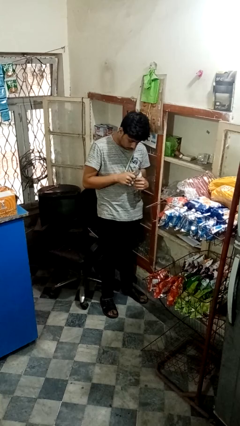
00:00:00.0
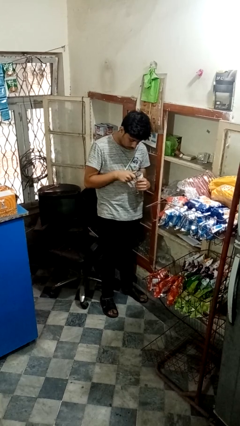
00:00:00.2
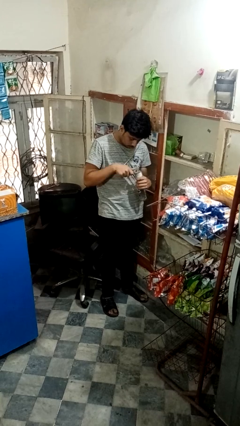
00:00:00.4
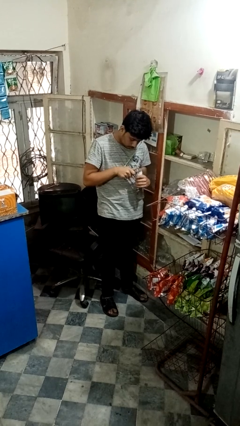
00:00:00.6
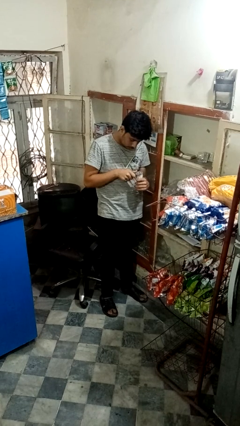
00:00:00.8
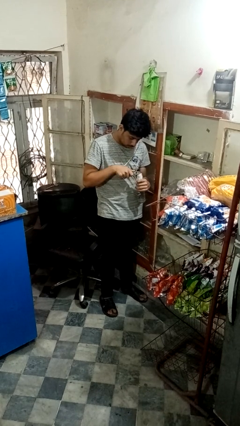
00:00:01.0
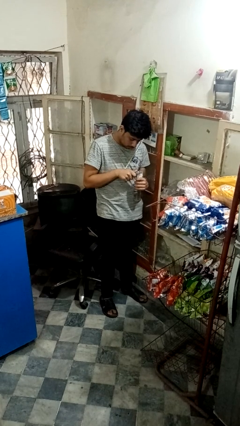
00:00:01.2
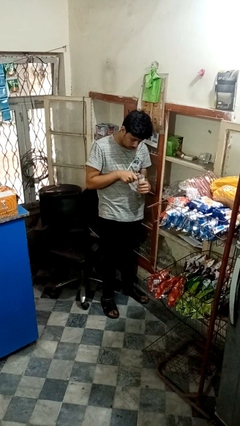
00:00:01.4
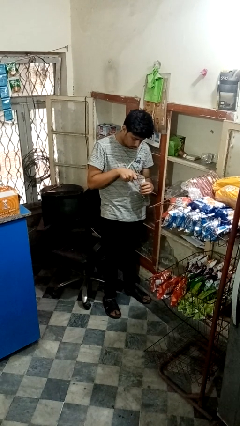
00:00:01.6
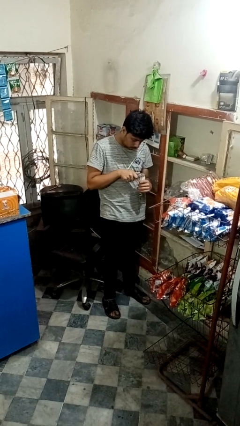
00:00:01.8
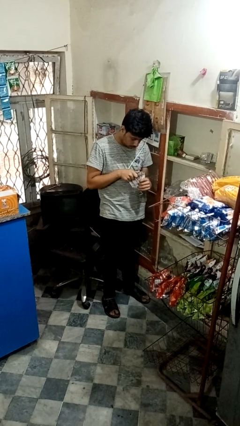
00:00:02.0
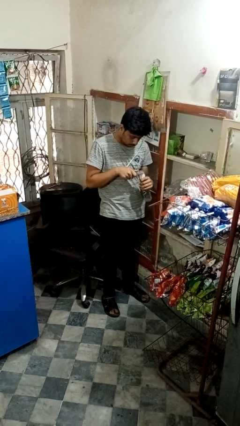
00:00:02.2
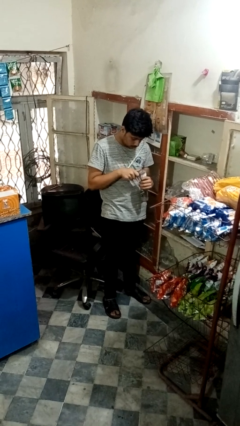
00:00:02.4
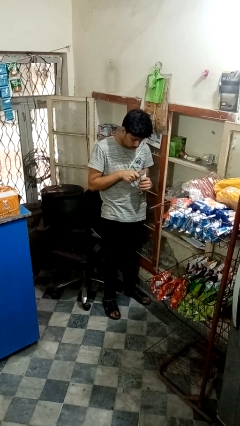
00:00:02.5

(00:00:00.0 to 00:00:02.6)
person opens can with can opener

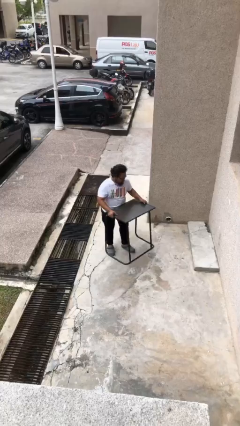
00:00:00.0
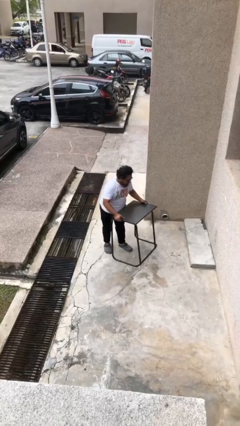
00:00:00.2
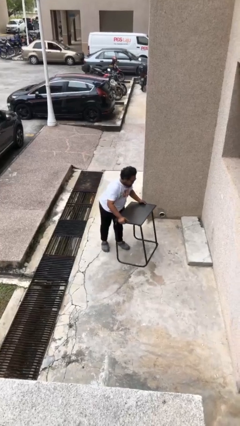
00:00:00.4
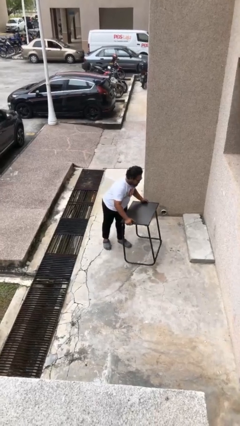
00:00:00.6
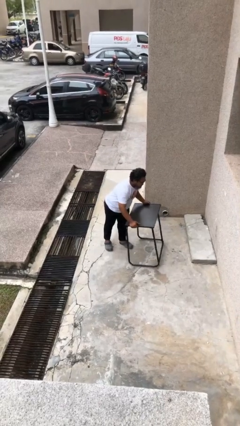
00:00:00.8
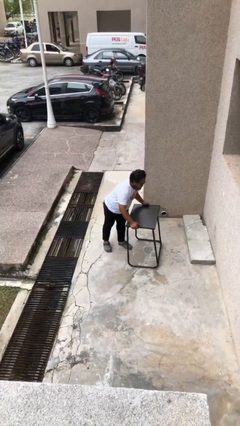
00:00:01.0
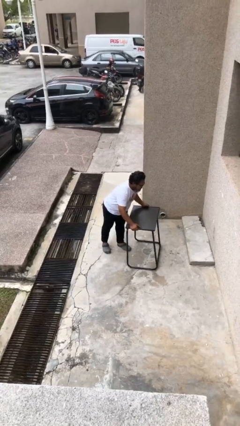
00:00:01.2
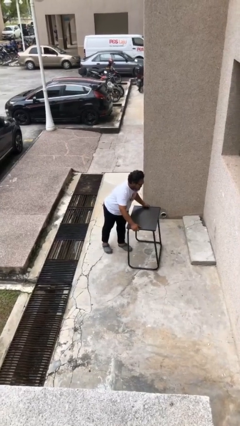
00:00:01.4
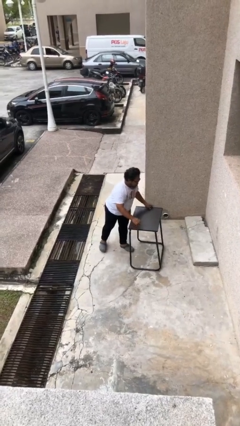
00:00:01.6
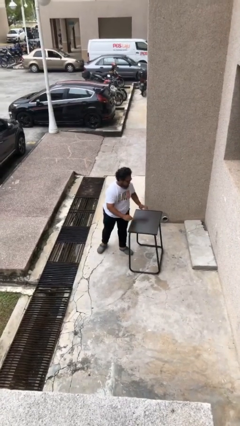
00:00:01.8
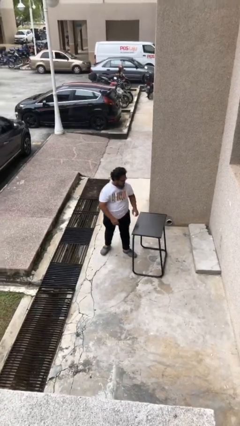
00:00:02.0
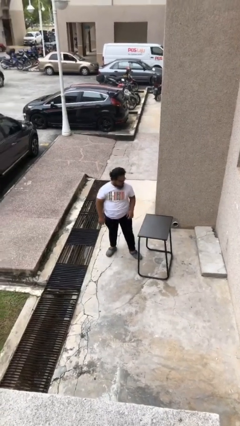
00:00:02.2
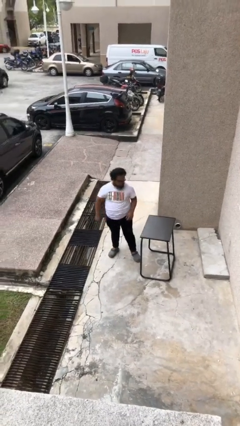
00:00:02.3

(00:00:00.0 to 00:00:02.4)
person puts down object on floor

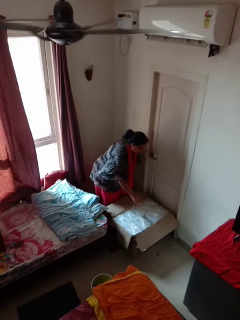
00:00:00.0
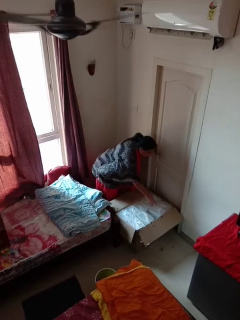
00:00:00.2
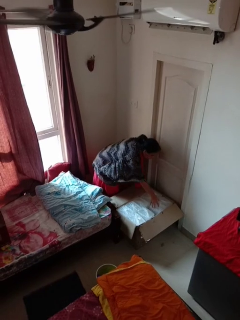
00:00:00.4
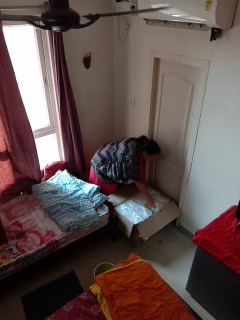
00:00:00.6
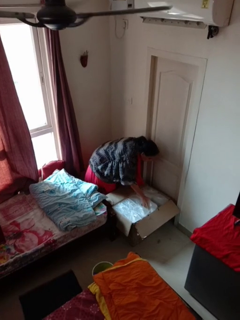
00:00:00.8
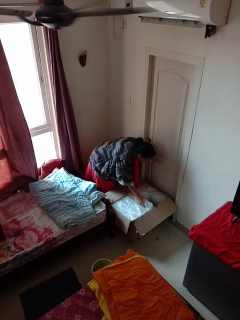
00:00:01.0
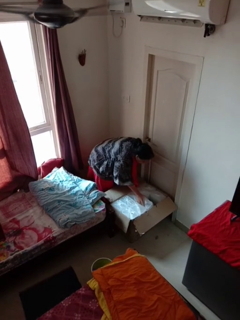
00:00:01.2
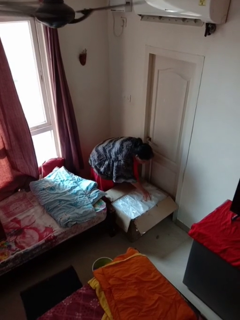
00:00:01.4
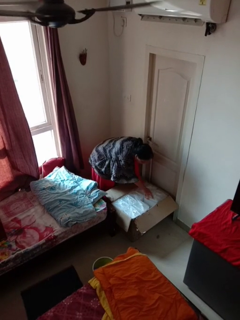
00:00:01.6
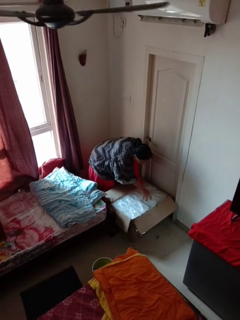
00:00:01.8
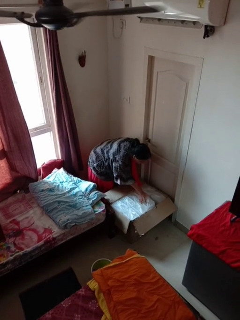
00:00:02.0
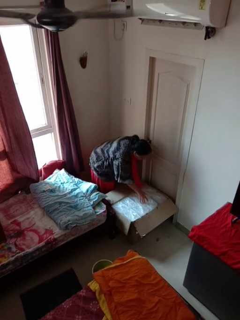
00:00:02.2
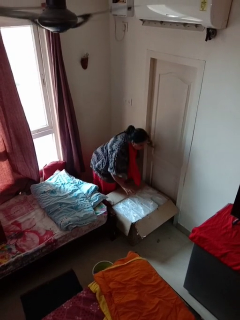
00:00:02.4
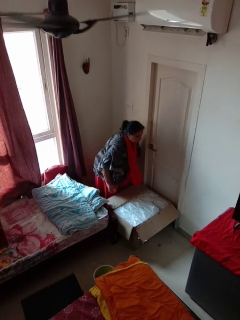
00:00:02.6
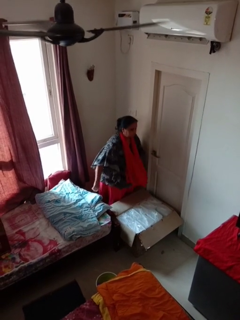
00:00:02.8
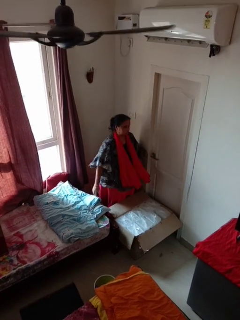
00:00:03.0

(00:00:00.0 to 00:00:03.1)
person searches in box

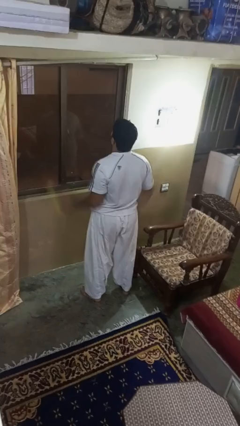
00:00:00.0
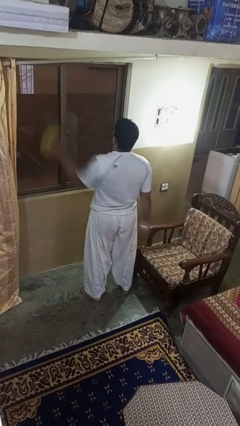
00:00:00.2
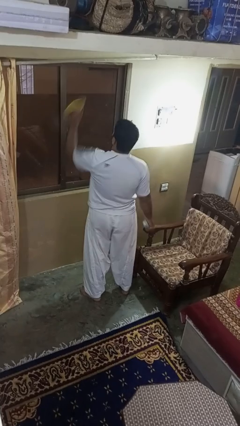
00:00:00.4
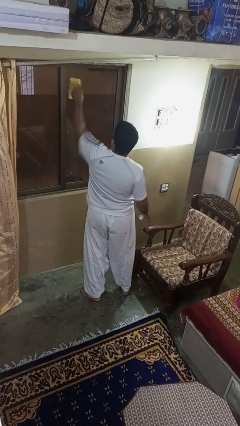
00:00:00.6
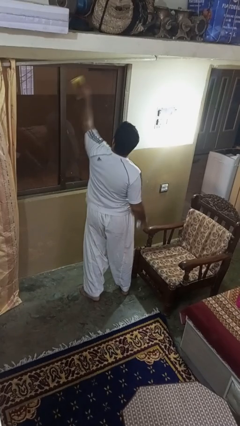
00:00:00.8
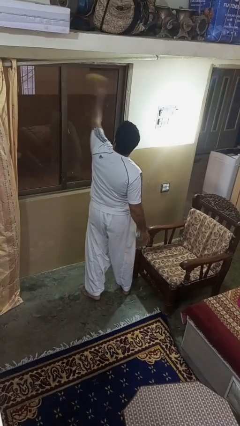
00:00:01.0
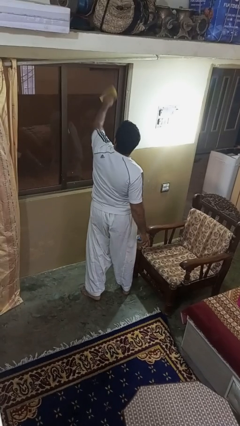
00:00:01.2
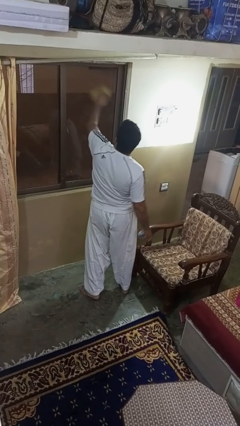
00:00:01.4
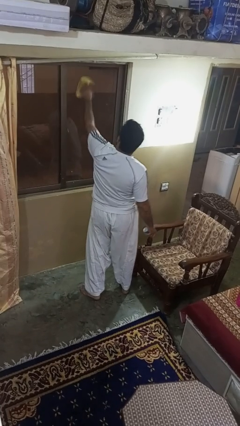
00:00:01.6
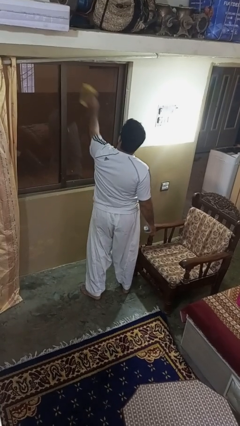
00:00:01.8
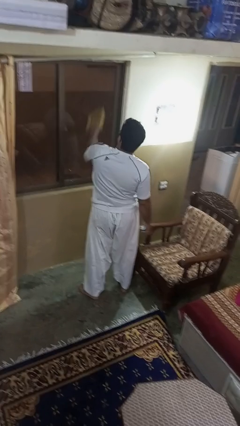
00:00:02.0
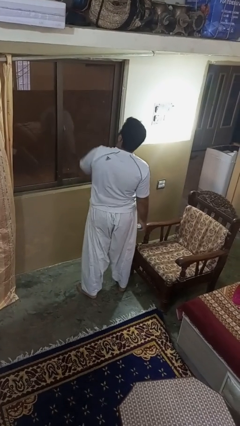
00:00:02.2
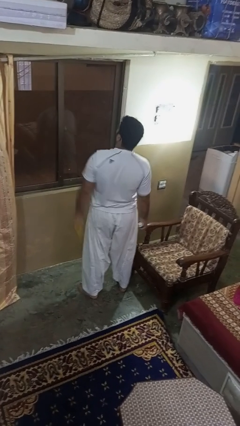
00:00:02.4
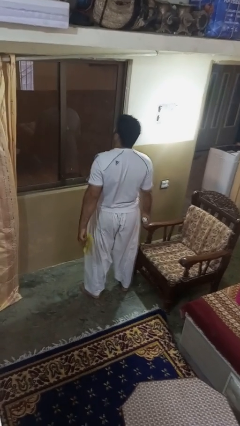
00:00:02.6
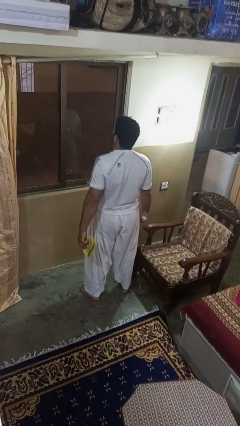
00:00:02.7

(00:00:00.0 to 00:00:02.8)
person washes window

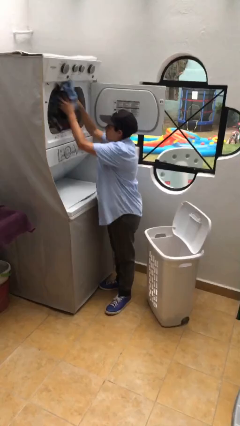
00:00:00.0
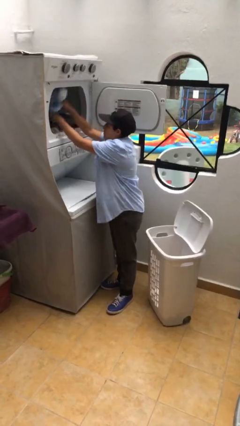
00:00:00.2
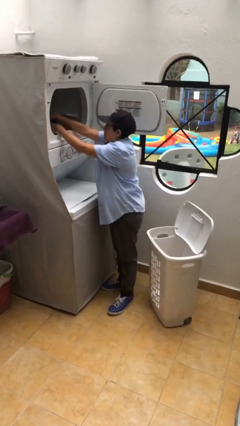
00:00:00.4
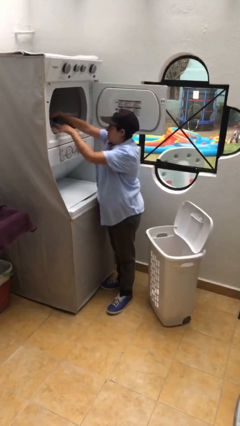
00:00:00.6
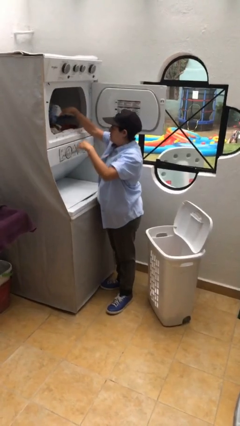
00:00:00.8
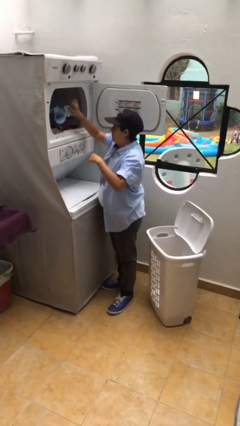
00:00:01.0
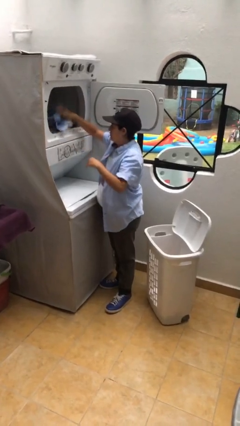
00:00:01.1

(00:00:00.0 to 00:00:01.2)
person loads dryer

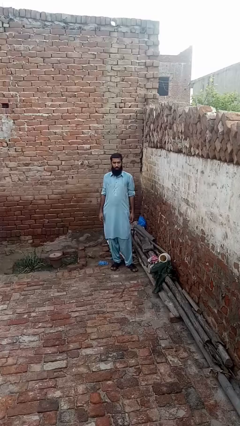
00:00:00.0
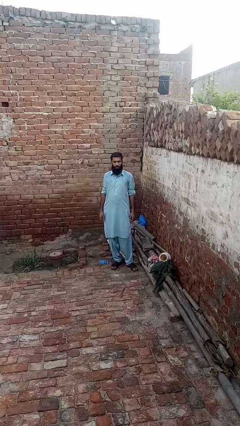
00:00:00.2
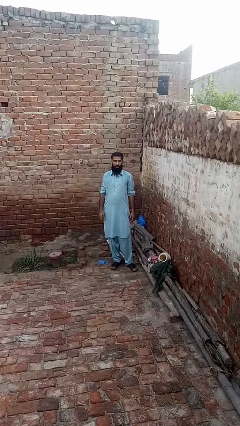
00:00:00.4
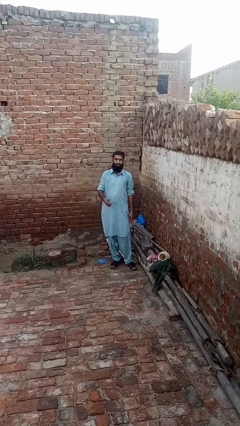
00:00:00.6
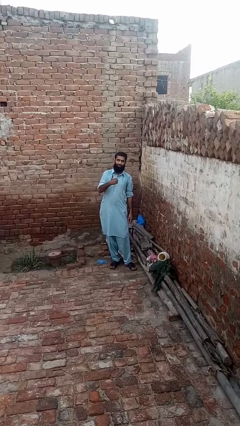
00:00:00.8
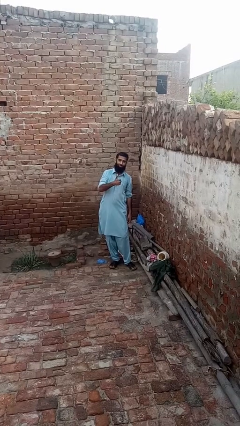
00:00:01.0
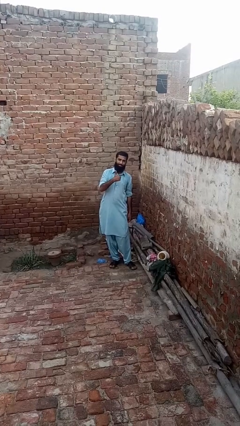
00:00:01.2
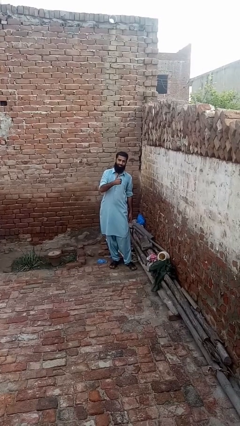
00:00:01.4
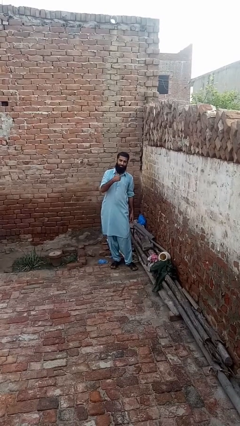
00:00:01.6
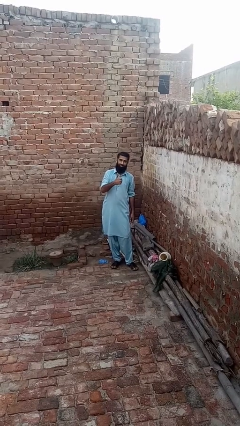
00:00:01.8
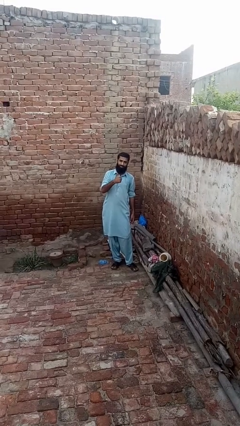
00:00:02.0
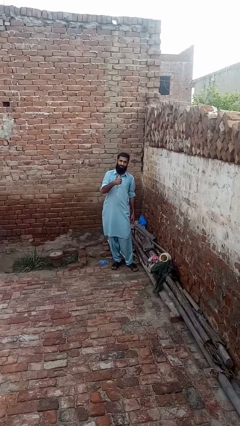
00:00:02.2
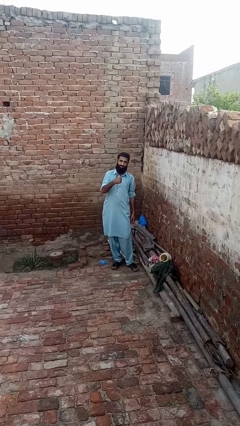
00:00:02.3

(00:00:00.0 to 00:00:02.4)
person gestures thumbs up

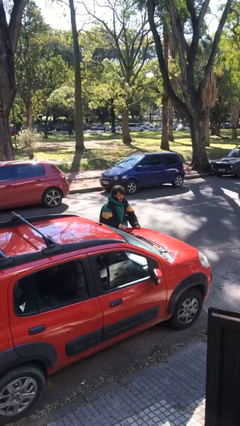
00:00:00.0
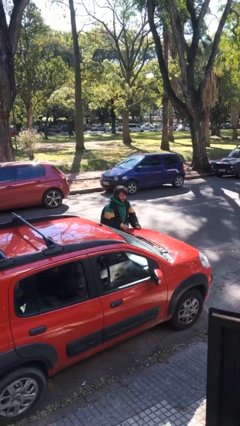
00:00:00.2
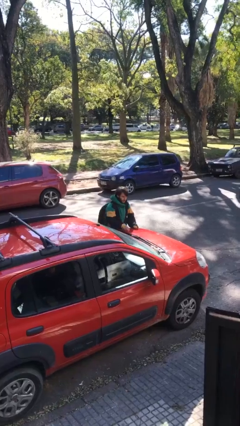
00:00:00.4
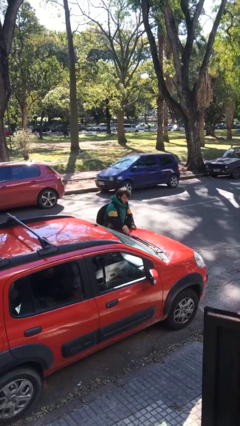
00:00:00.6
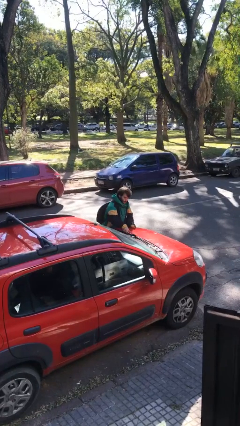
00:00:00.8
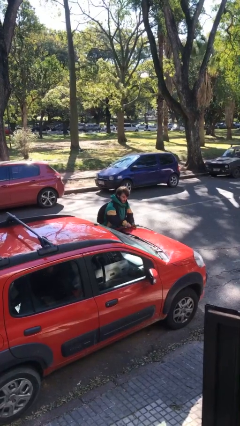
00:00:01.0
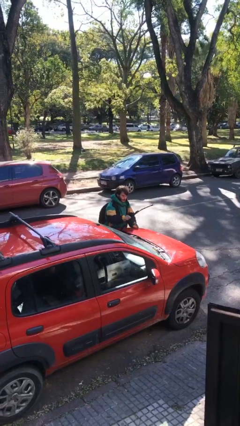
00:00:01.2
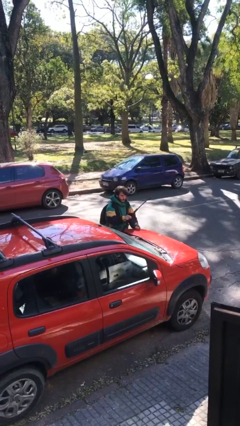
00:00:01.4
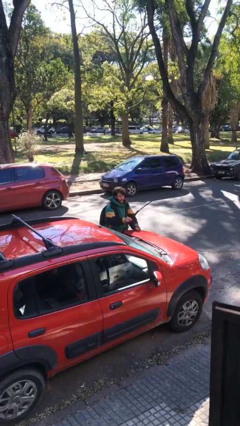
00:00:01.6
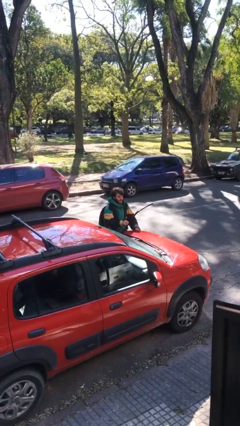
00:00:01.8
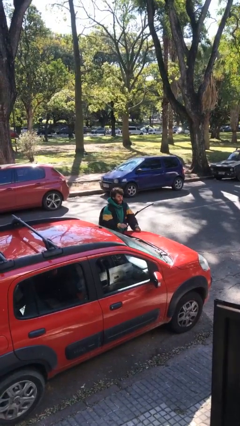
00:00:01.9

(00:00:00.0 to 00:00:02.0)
person flips up car wipers

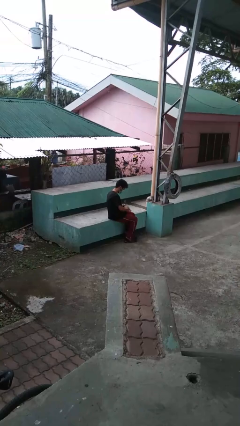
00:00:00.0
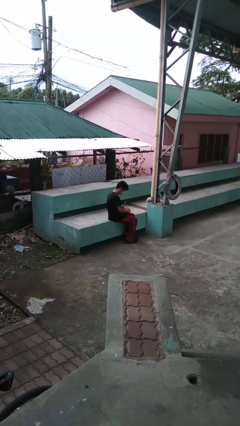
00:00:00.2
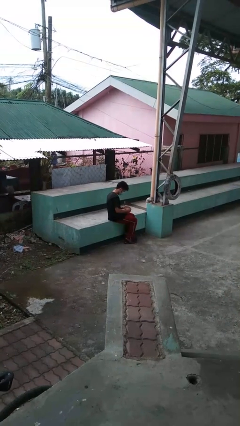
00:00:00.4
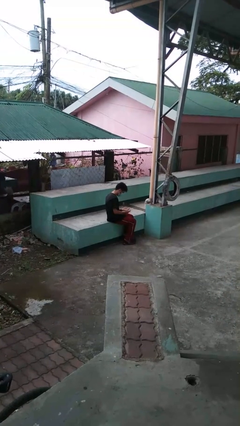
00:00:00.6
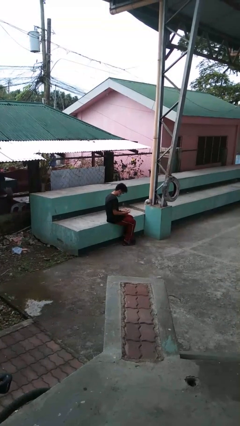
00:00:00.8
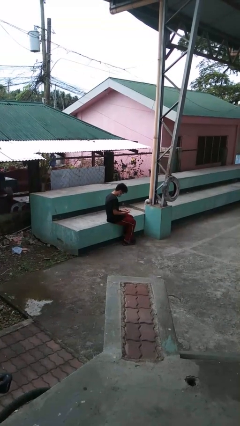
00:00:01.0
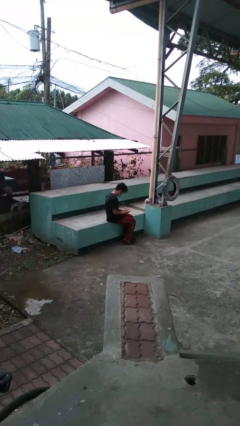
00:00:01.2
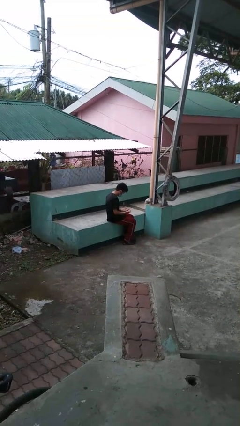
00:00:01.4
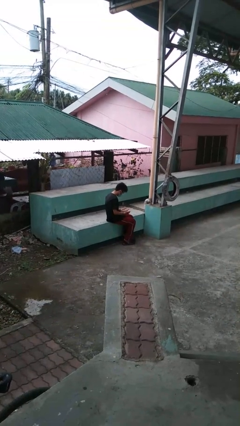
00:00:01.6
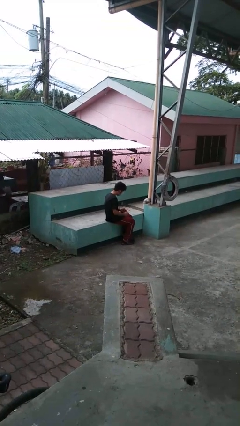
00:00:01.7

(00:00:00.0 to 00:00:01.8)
person looks at hands in lap
